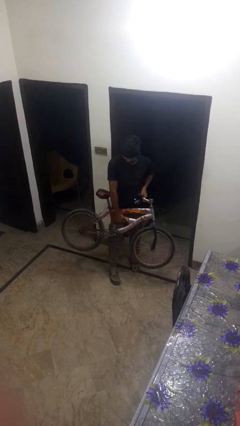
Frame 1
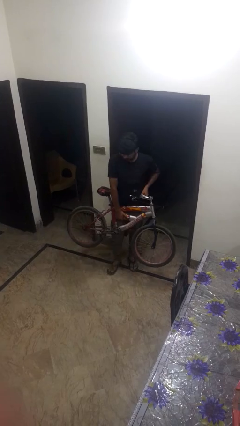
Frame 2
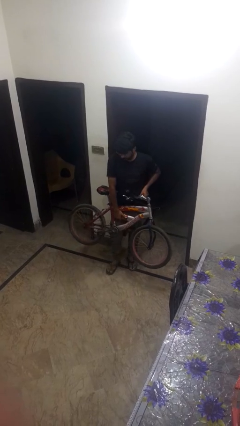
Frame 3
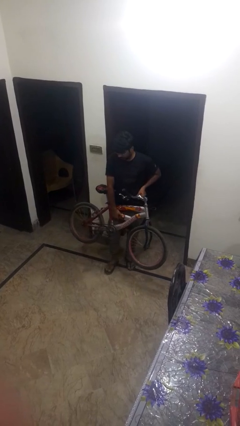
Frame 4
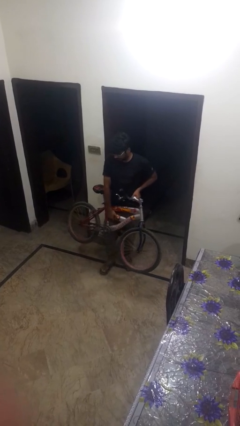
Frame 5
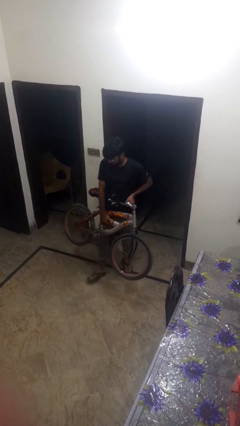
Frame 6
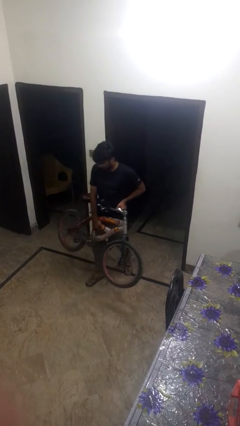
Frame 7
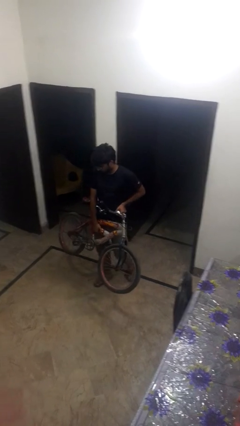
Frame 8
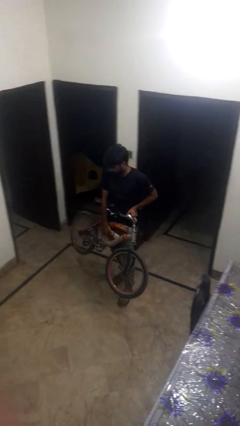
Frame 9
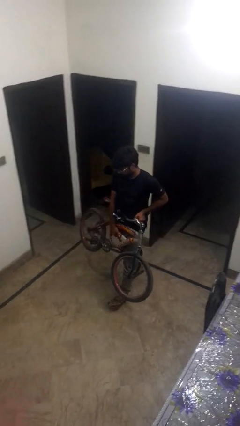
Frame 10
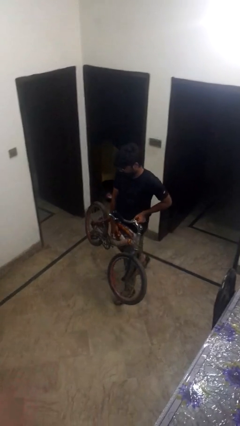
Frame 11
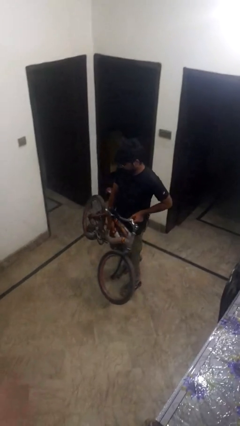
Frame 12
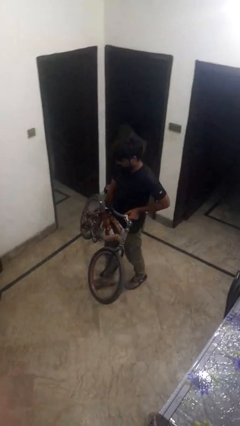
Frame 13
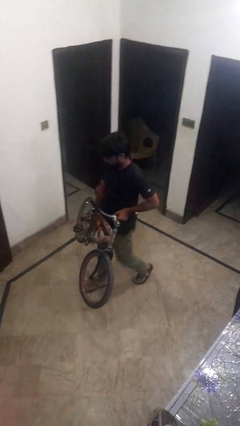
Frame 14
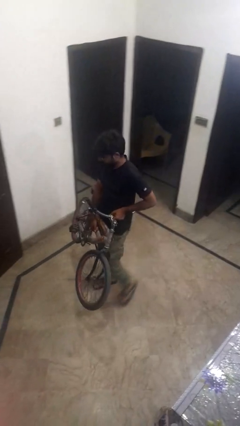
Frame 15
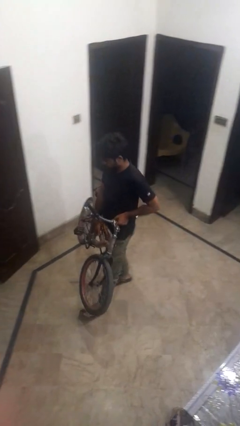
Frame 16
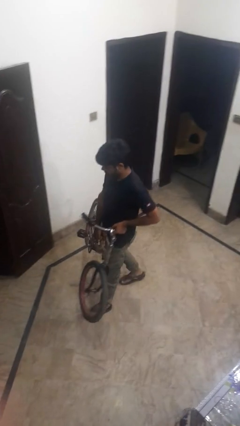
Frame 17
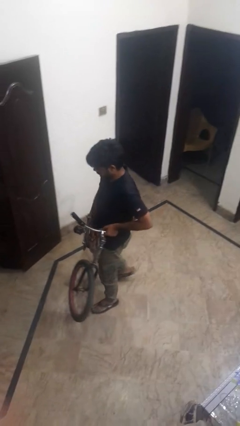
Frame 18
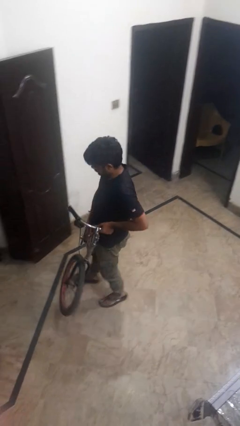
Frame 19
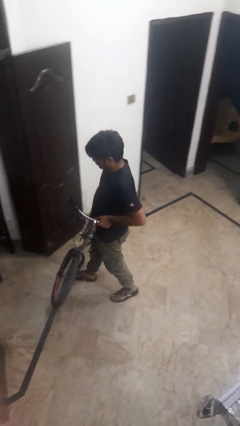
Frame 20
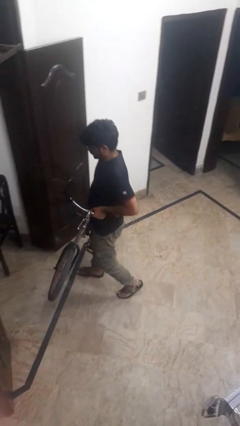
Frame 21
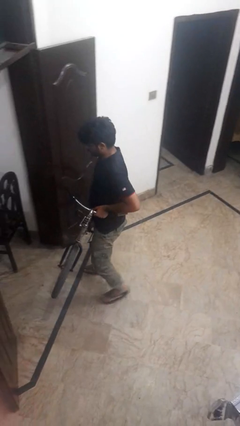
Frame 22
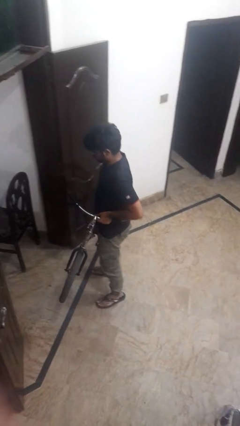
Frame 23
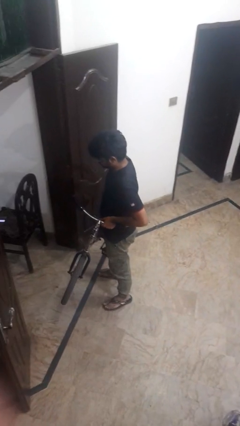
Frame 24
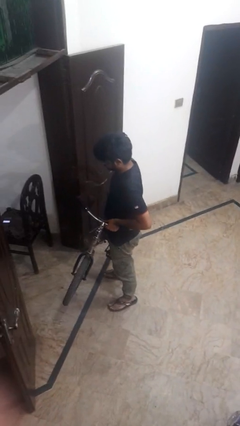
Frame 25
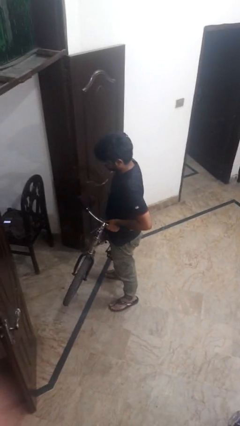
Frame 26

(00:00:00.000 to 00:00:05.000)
person carries bicycle

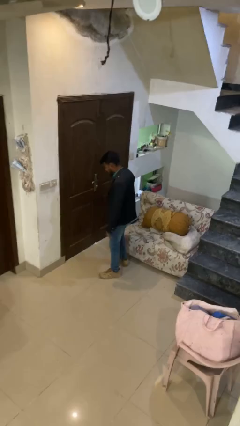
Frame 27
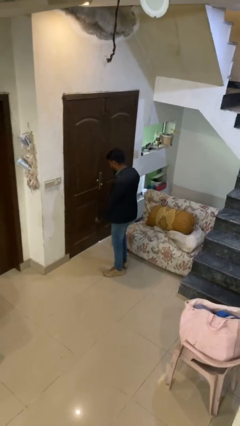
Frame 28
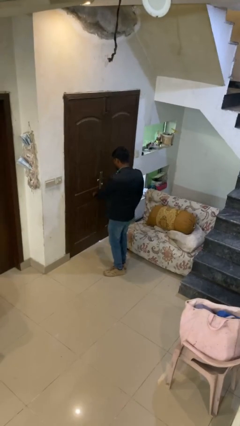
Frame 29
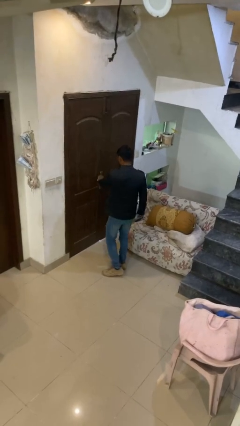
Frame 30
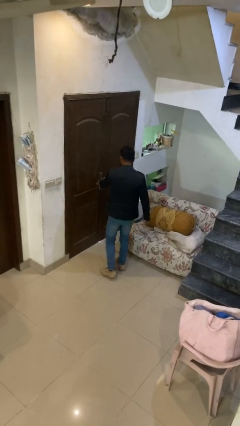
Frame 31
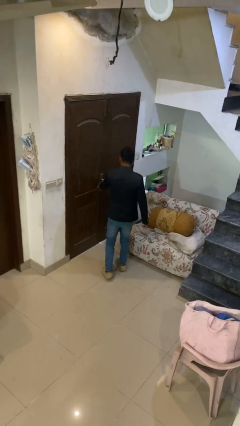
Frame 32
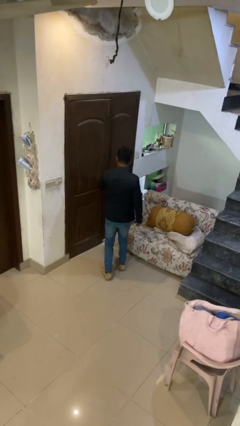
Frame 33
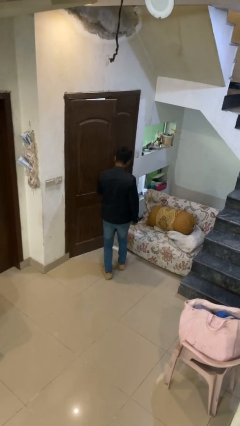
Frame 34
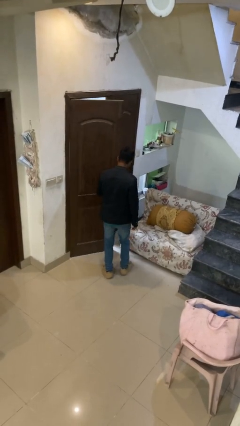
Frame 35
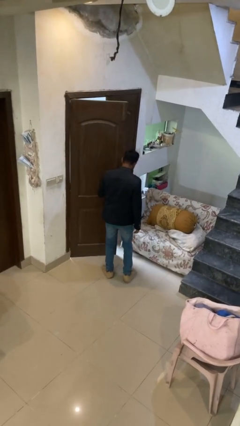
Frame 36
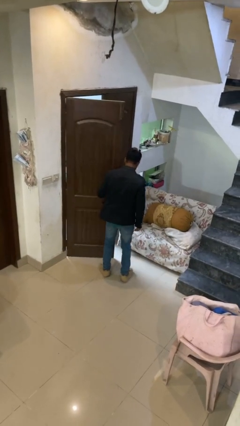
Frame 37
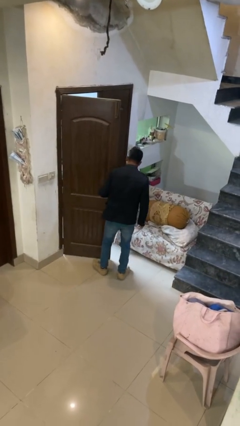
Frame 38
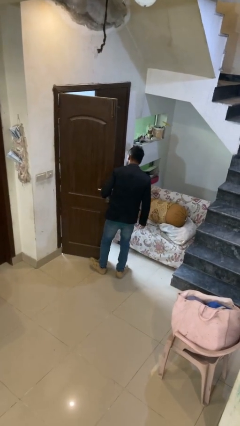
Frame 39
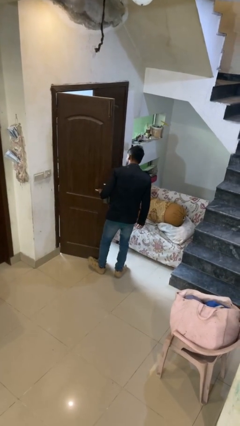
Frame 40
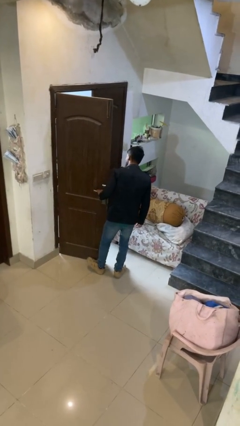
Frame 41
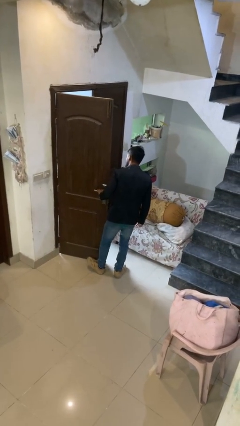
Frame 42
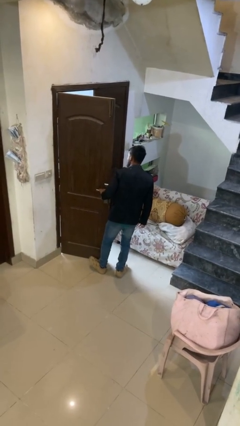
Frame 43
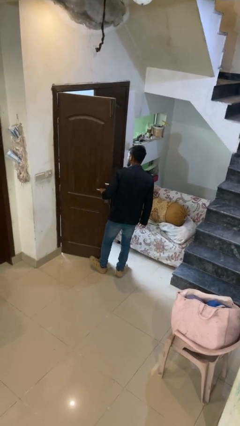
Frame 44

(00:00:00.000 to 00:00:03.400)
person opens facility door

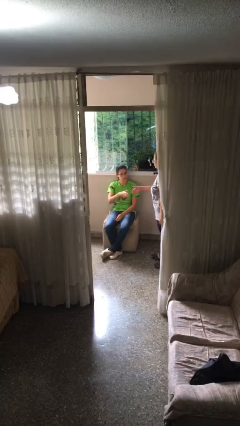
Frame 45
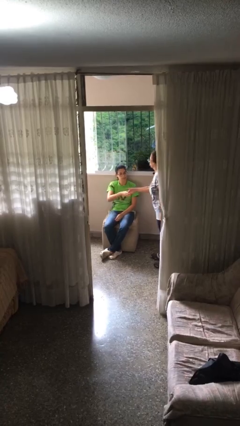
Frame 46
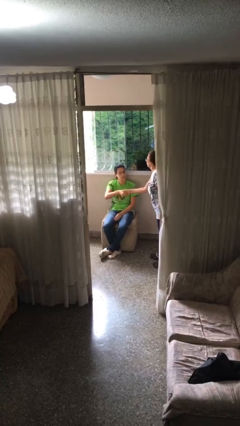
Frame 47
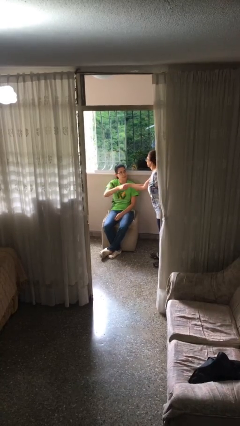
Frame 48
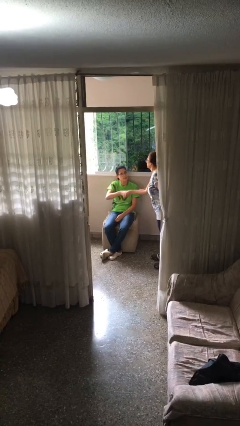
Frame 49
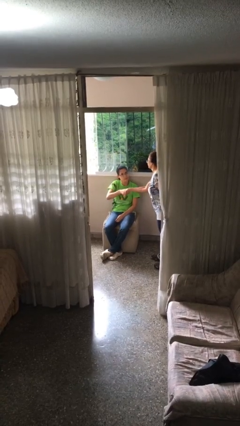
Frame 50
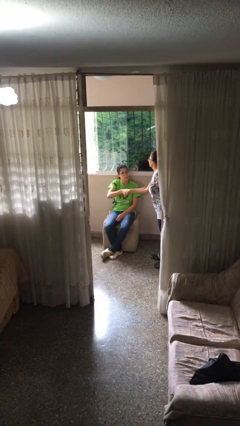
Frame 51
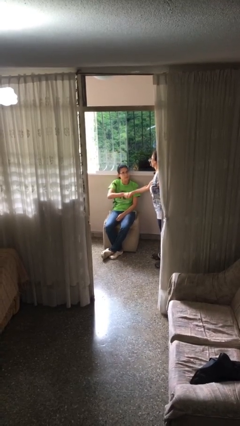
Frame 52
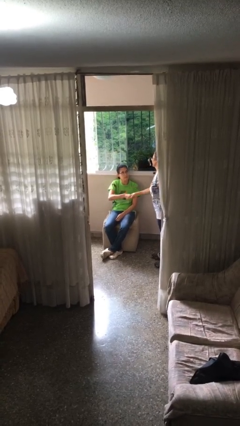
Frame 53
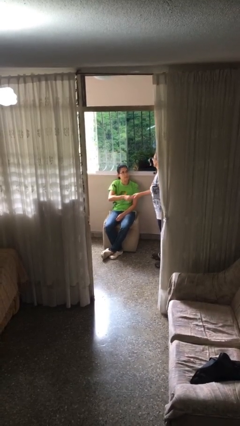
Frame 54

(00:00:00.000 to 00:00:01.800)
person shakes hand

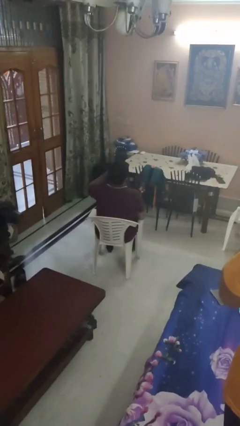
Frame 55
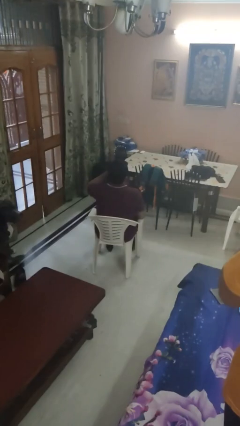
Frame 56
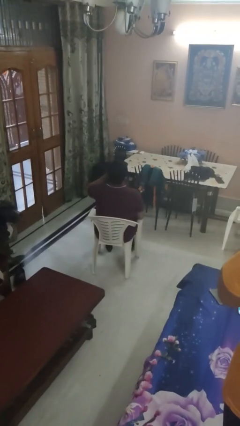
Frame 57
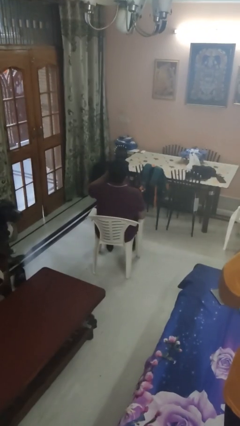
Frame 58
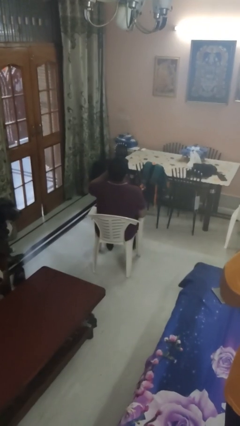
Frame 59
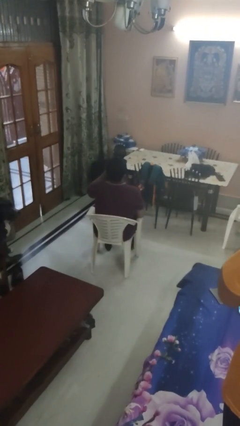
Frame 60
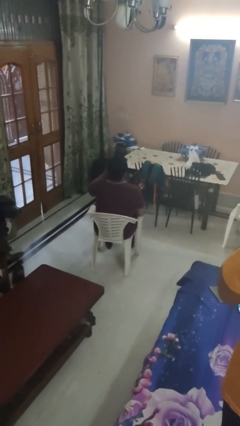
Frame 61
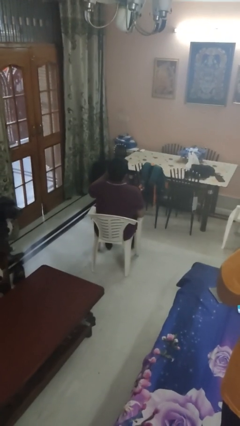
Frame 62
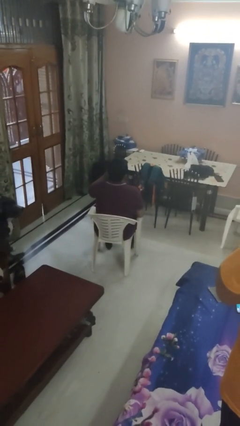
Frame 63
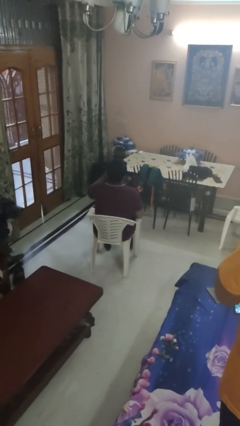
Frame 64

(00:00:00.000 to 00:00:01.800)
person rubs eyes

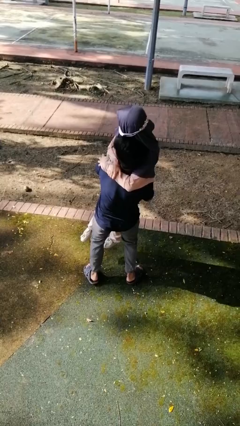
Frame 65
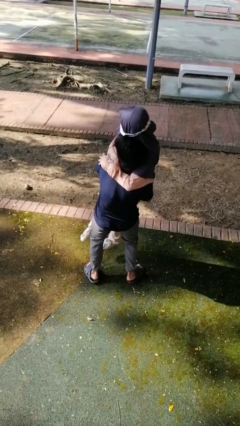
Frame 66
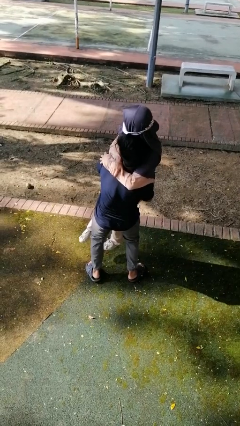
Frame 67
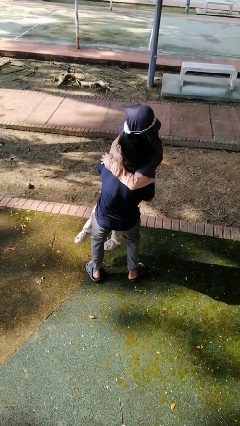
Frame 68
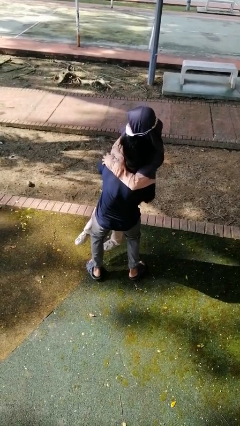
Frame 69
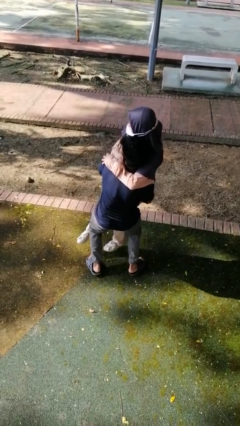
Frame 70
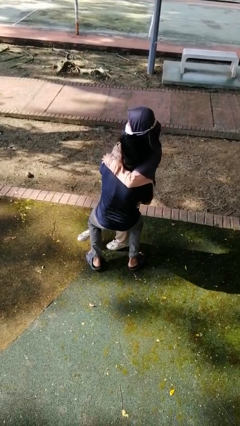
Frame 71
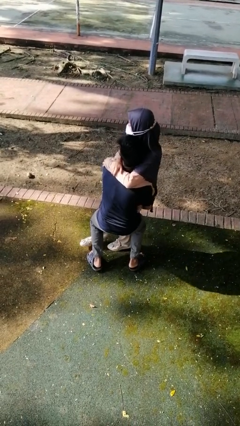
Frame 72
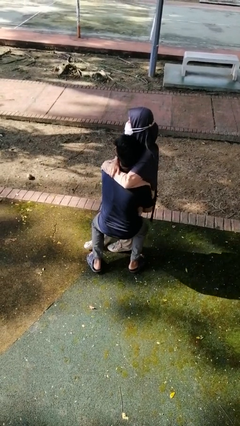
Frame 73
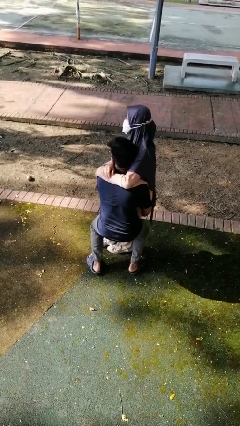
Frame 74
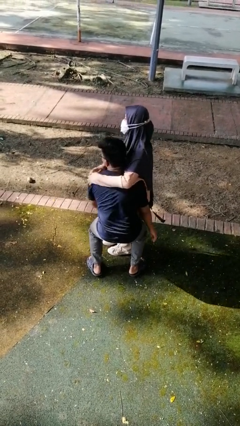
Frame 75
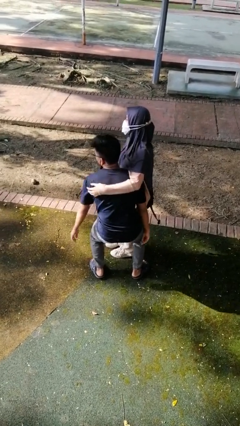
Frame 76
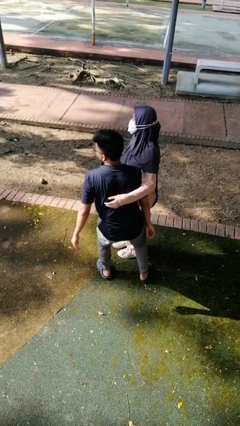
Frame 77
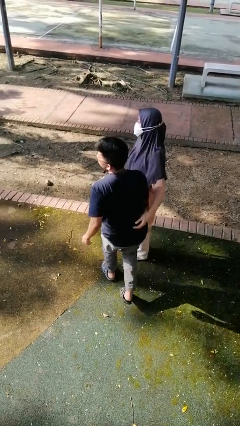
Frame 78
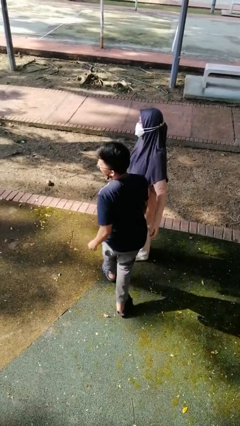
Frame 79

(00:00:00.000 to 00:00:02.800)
person puts down person

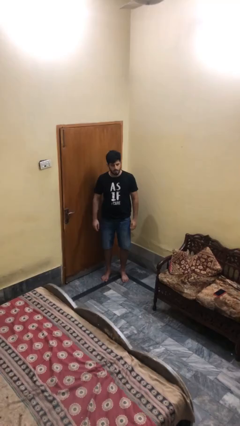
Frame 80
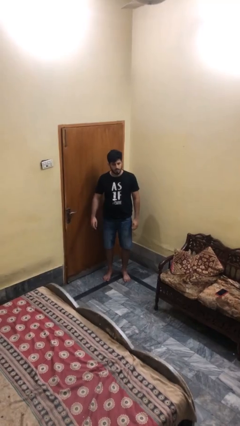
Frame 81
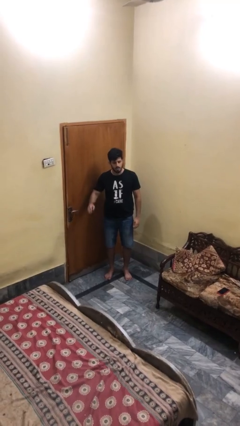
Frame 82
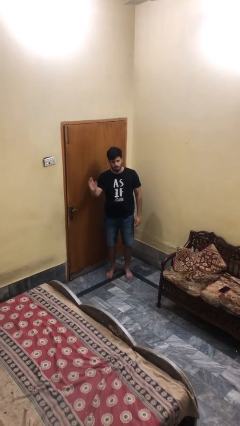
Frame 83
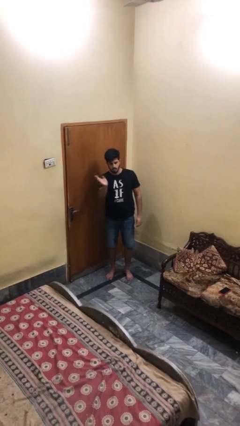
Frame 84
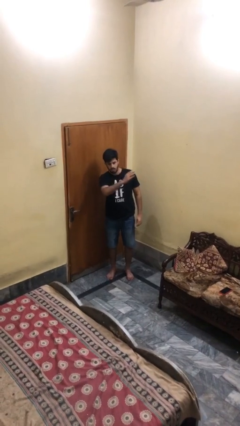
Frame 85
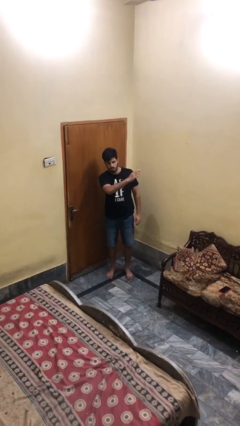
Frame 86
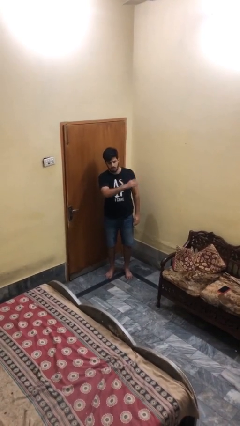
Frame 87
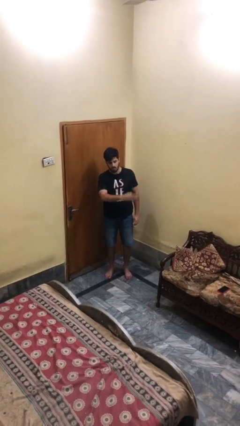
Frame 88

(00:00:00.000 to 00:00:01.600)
person gestures swipe left

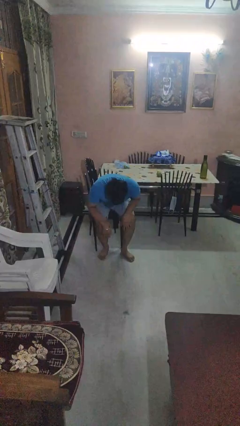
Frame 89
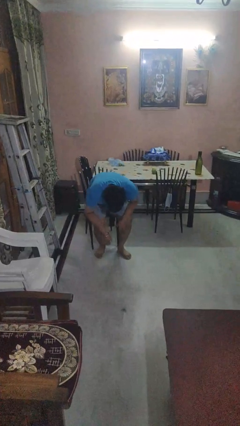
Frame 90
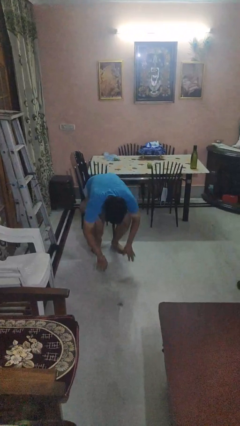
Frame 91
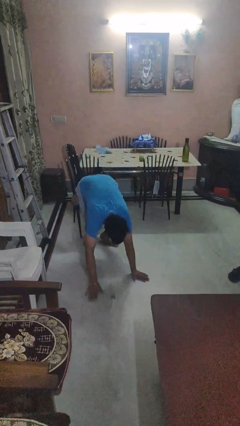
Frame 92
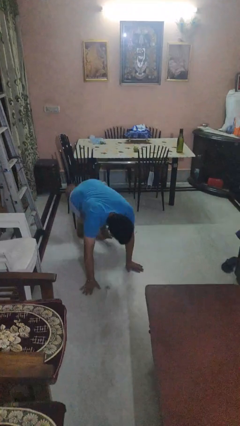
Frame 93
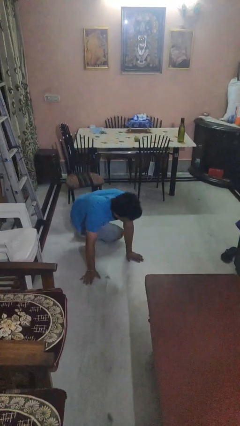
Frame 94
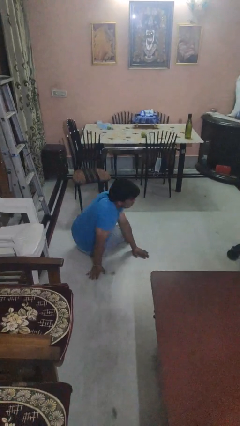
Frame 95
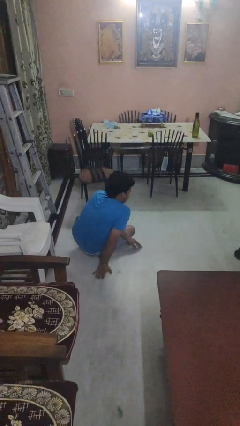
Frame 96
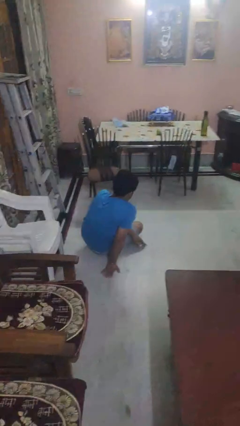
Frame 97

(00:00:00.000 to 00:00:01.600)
person falls while standing
